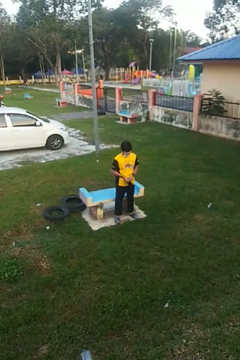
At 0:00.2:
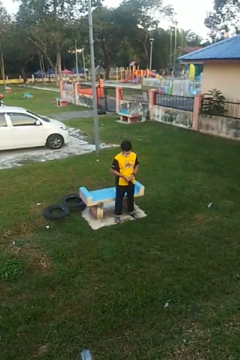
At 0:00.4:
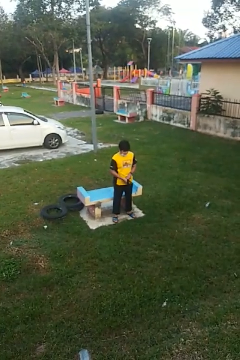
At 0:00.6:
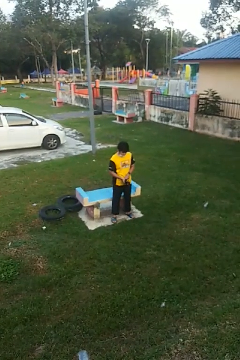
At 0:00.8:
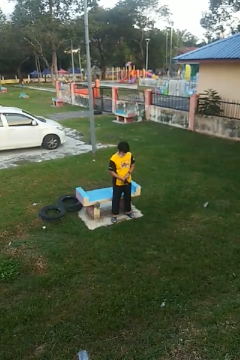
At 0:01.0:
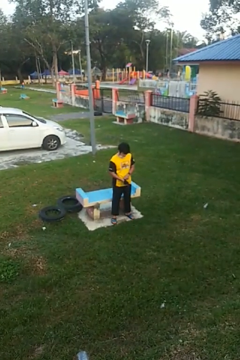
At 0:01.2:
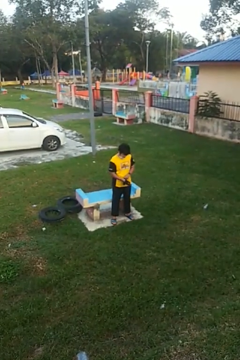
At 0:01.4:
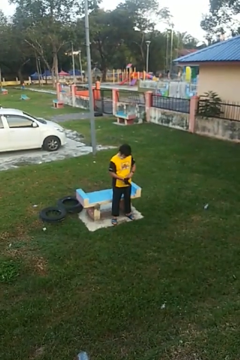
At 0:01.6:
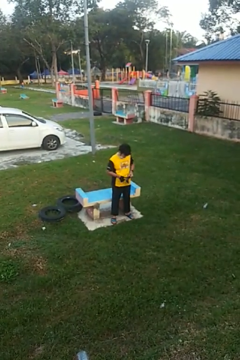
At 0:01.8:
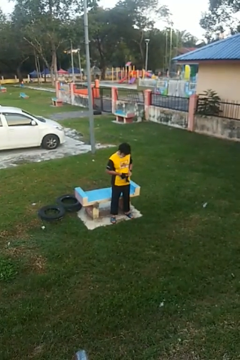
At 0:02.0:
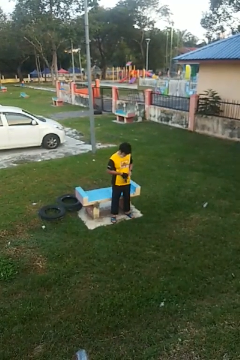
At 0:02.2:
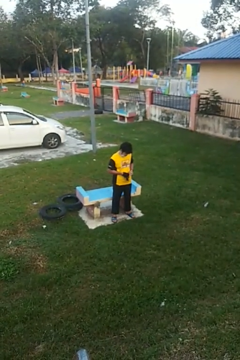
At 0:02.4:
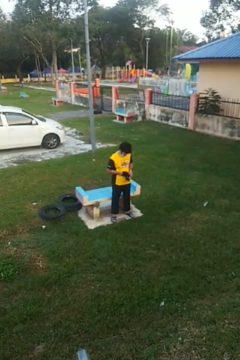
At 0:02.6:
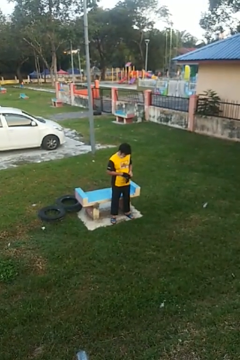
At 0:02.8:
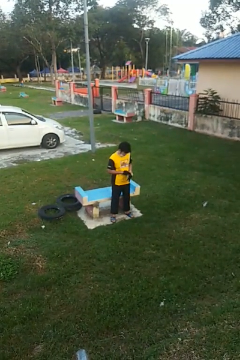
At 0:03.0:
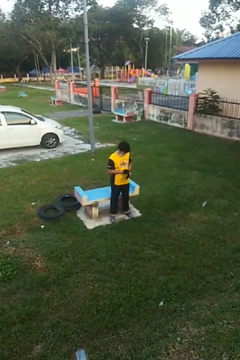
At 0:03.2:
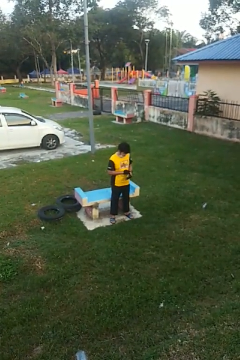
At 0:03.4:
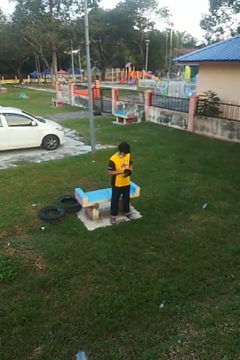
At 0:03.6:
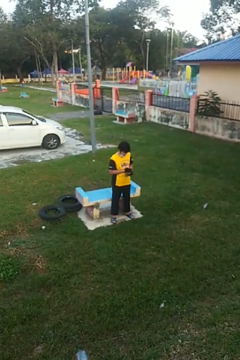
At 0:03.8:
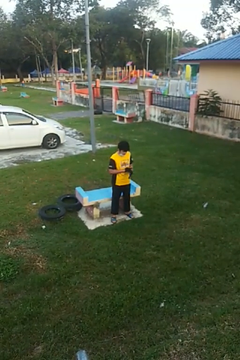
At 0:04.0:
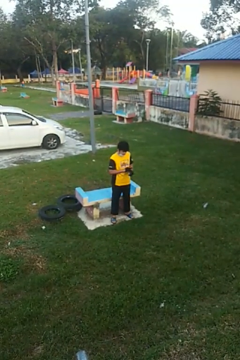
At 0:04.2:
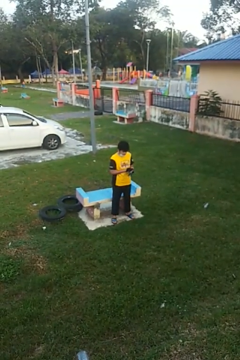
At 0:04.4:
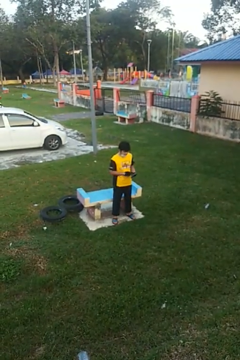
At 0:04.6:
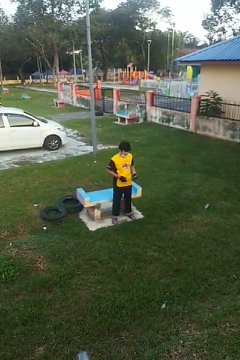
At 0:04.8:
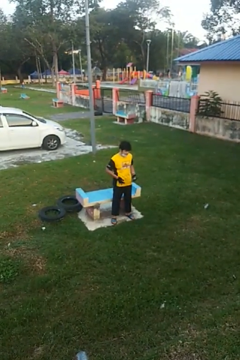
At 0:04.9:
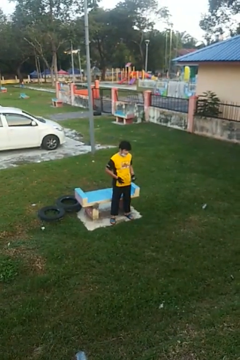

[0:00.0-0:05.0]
person puts on gloves

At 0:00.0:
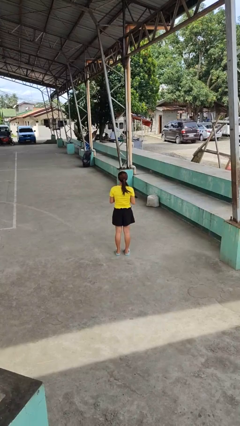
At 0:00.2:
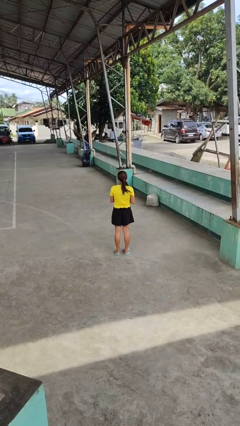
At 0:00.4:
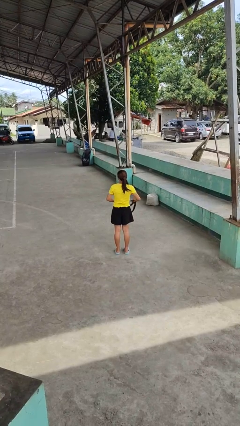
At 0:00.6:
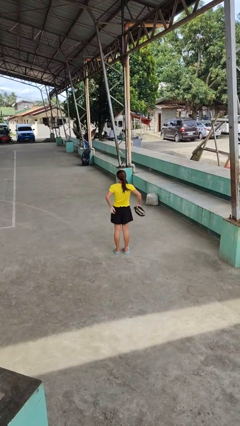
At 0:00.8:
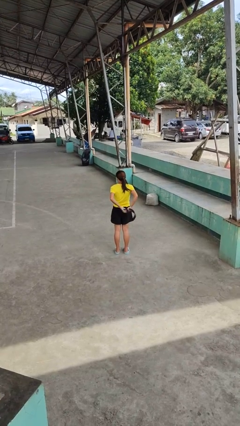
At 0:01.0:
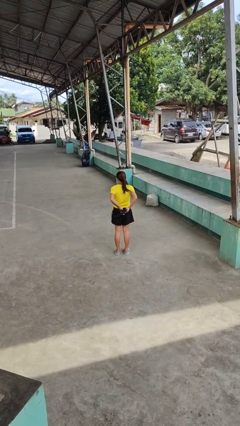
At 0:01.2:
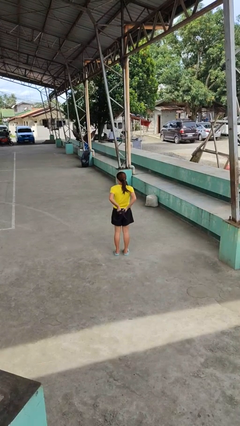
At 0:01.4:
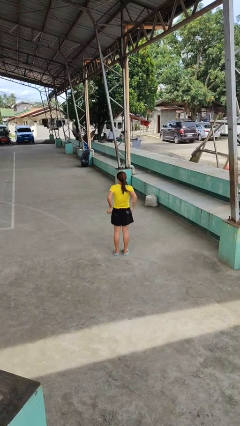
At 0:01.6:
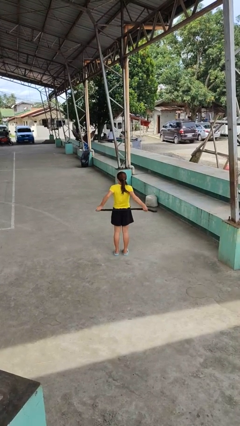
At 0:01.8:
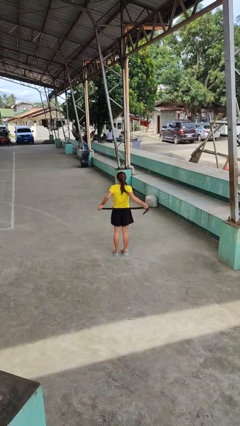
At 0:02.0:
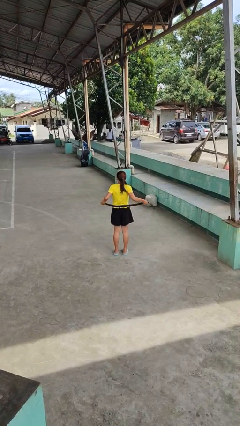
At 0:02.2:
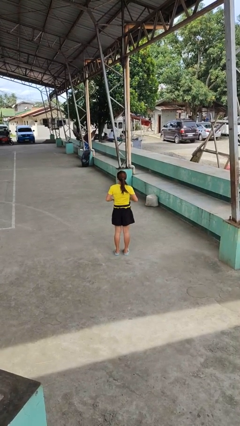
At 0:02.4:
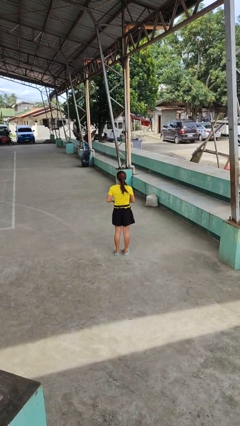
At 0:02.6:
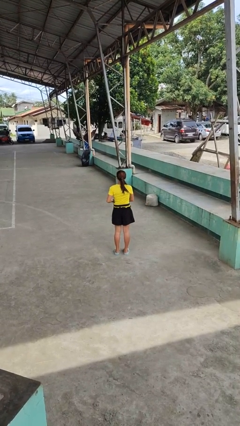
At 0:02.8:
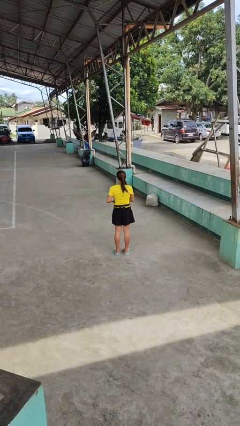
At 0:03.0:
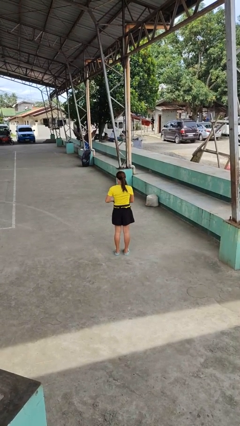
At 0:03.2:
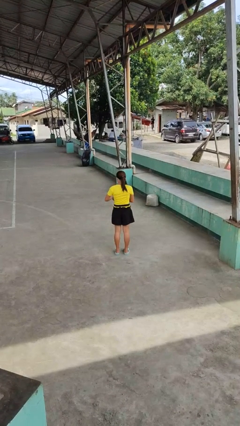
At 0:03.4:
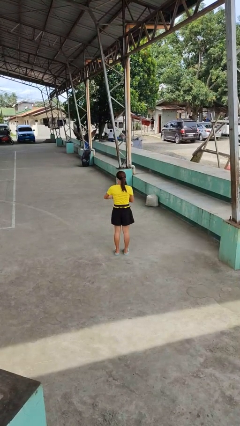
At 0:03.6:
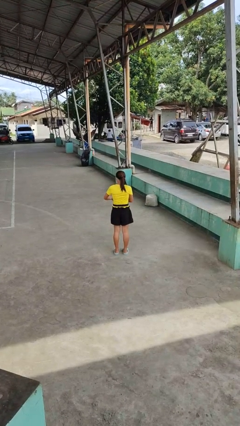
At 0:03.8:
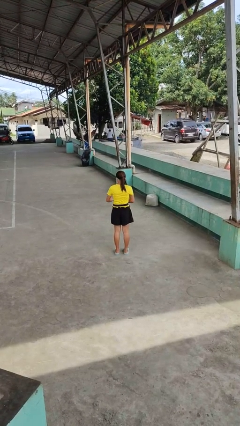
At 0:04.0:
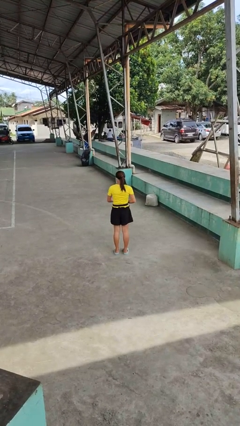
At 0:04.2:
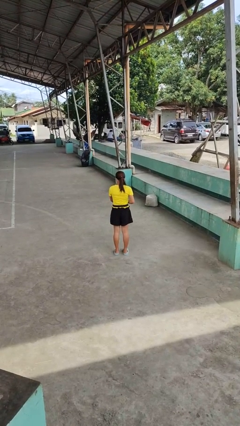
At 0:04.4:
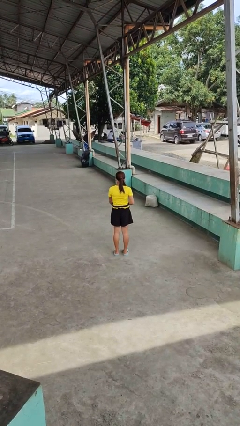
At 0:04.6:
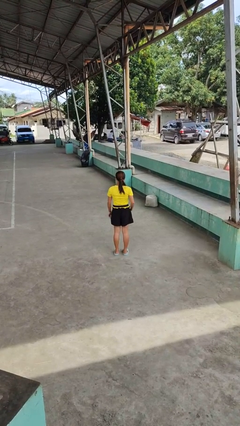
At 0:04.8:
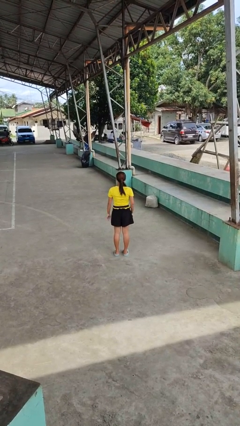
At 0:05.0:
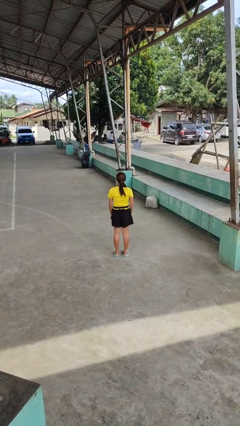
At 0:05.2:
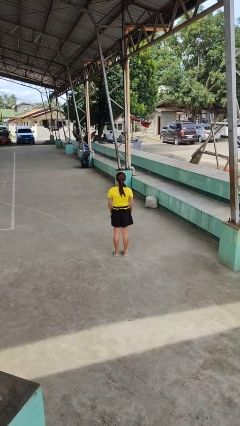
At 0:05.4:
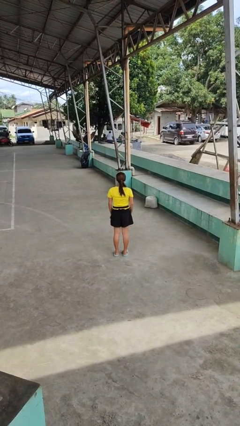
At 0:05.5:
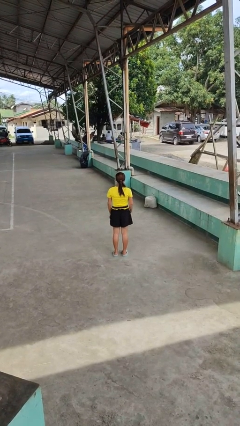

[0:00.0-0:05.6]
person puts on belt

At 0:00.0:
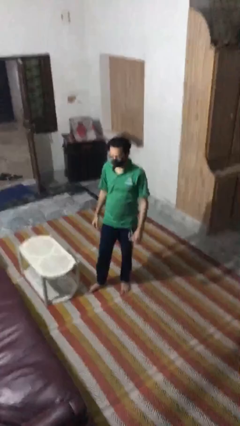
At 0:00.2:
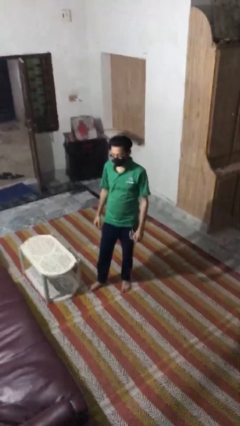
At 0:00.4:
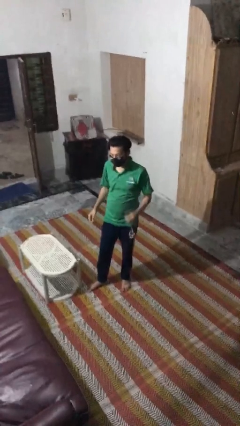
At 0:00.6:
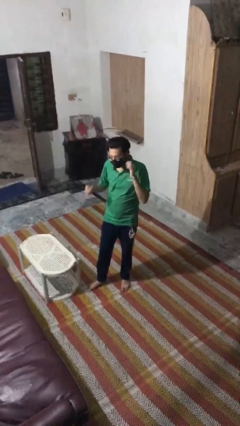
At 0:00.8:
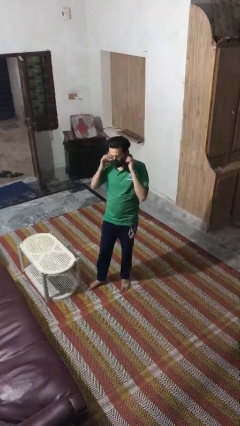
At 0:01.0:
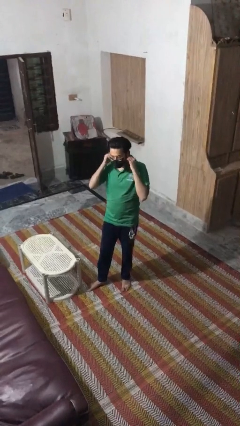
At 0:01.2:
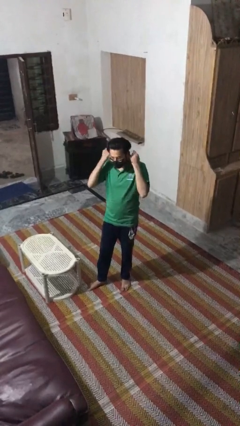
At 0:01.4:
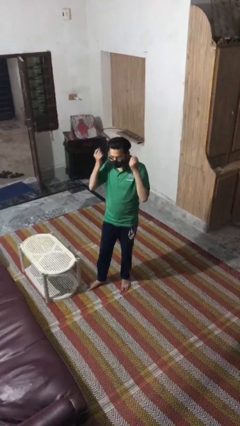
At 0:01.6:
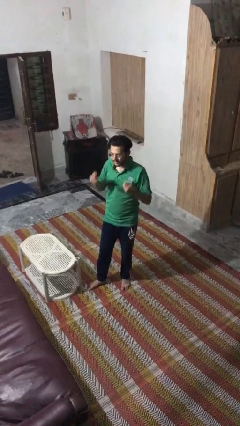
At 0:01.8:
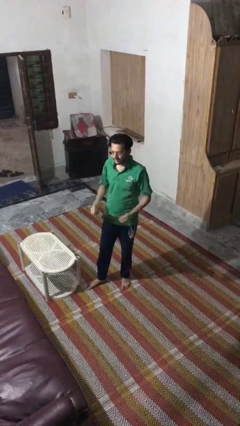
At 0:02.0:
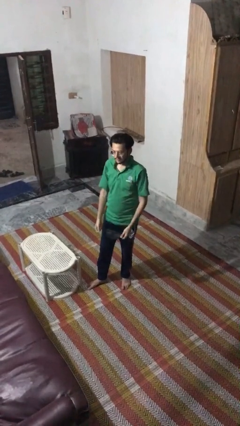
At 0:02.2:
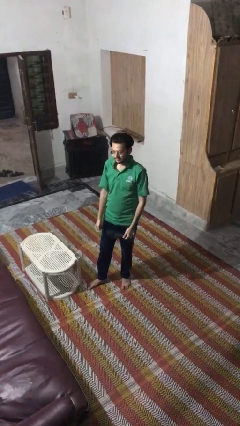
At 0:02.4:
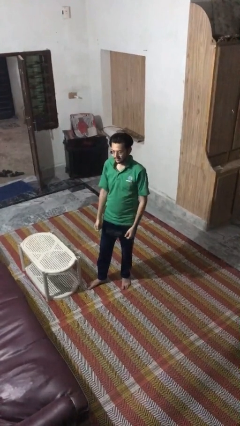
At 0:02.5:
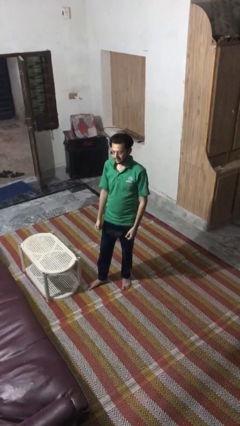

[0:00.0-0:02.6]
person takes off facemask

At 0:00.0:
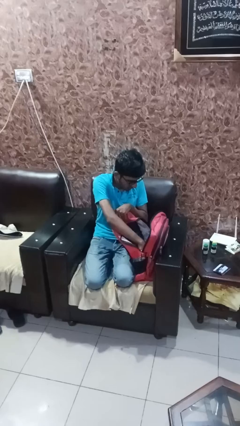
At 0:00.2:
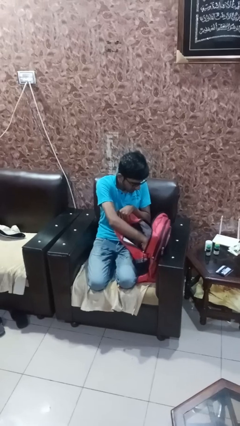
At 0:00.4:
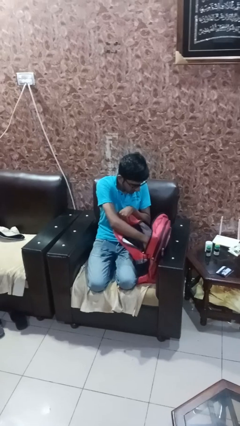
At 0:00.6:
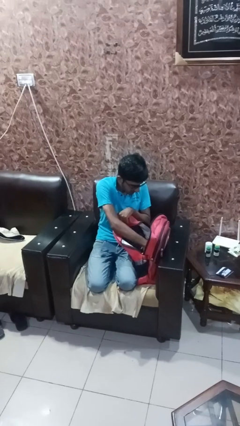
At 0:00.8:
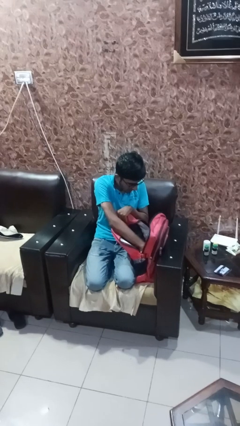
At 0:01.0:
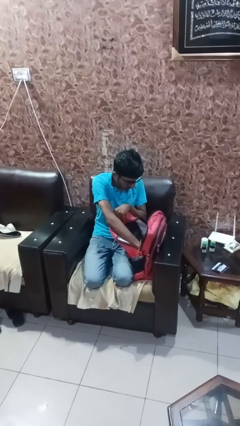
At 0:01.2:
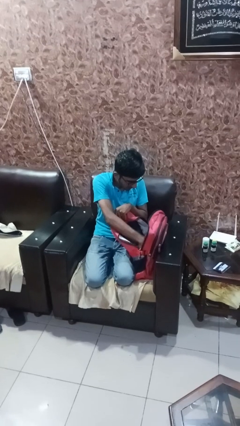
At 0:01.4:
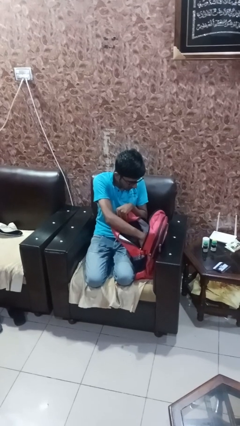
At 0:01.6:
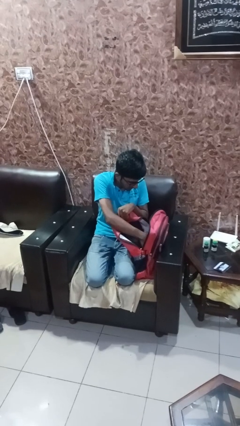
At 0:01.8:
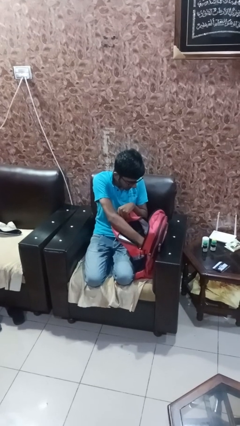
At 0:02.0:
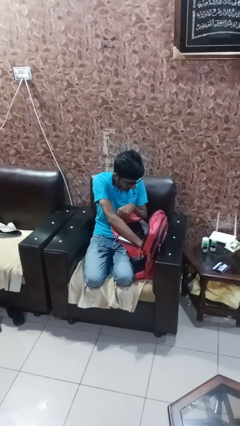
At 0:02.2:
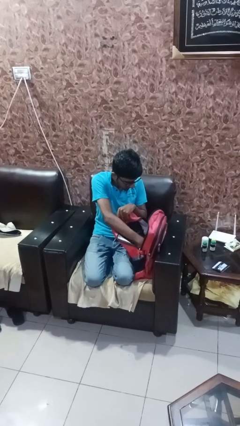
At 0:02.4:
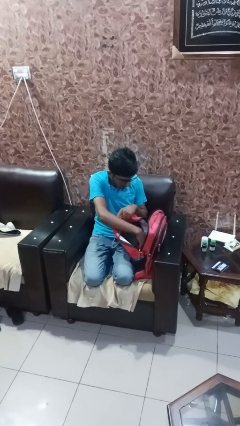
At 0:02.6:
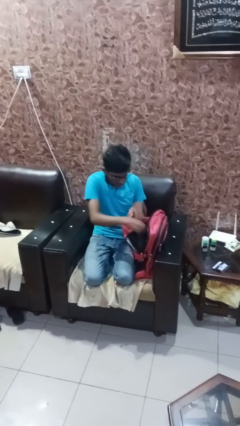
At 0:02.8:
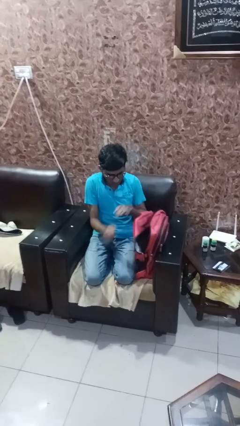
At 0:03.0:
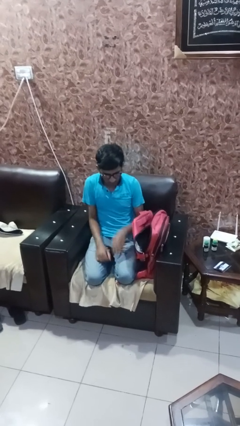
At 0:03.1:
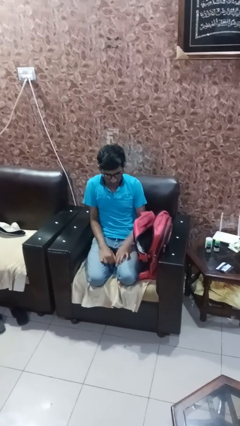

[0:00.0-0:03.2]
person searches in bag

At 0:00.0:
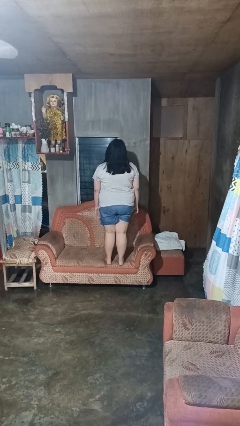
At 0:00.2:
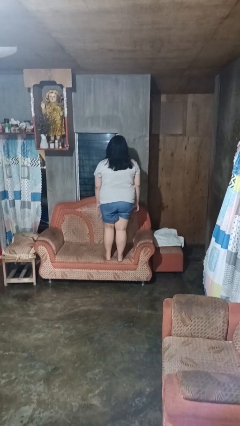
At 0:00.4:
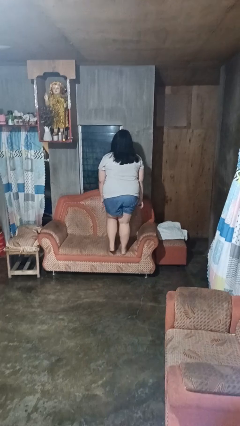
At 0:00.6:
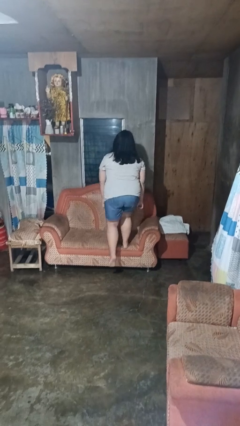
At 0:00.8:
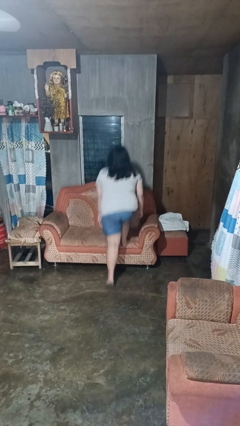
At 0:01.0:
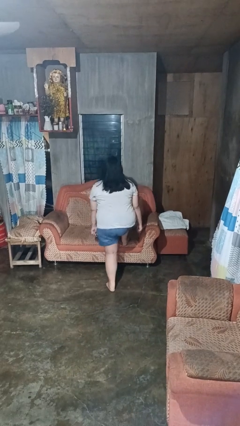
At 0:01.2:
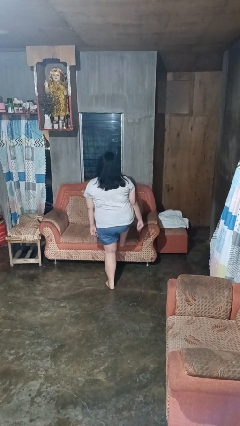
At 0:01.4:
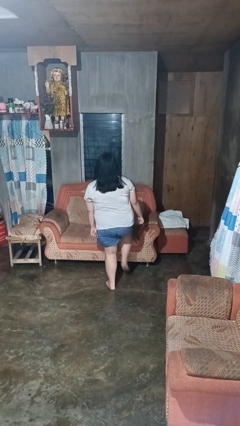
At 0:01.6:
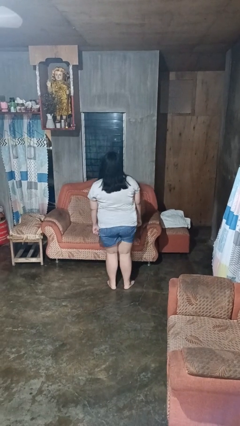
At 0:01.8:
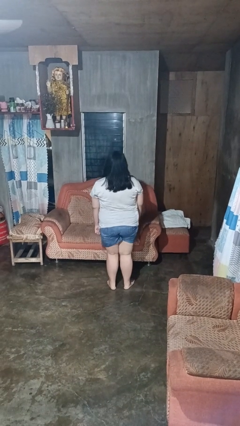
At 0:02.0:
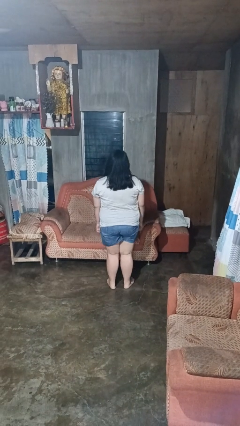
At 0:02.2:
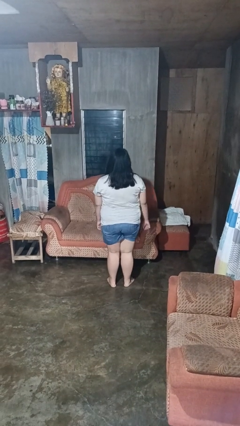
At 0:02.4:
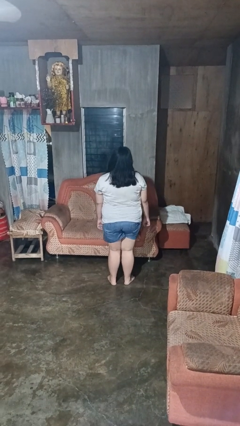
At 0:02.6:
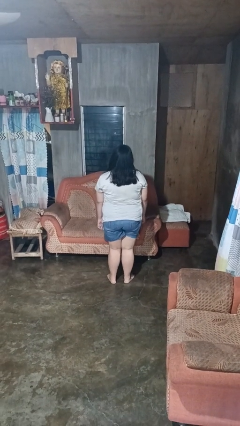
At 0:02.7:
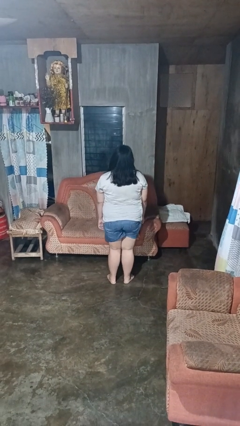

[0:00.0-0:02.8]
person climbs off couch
